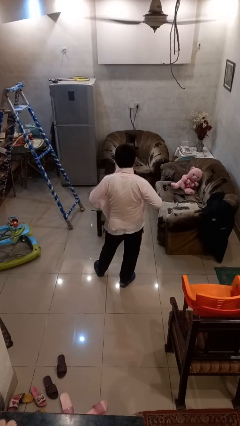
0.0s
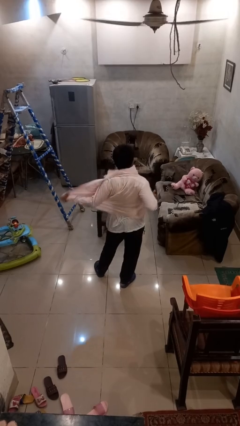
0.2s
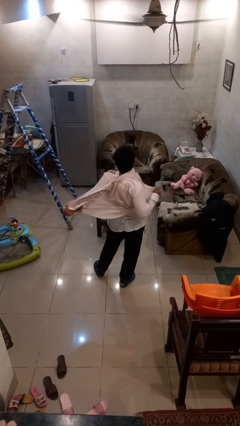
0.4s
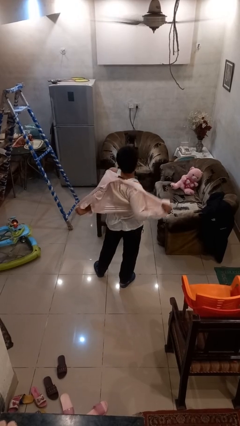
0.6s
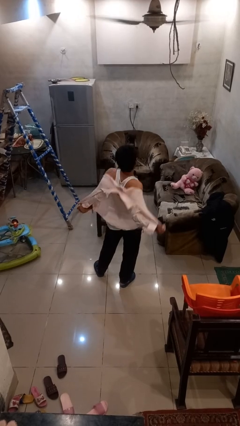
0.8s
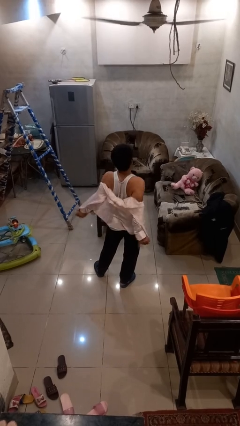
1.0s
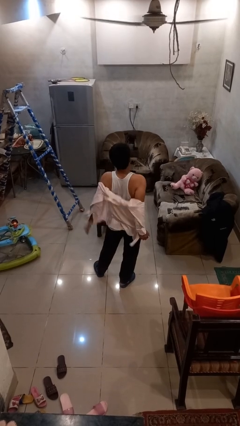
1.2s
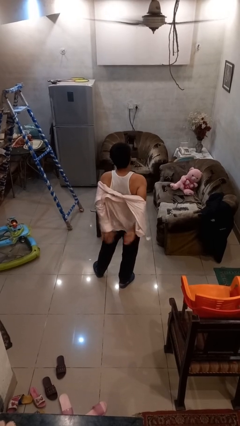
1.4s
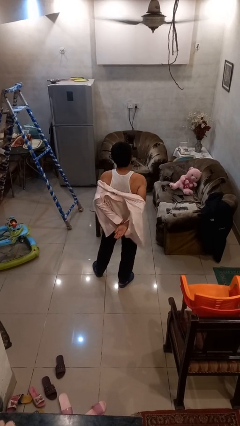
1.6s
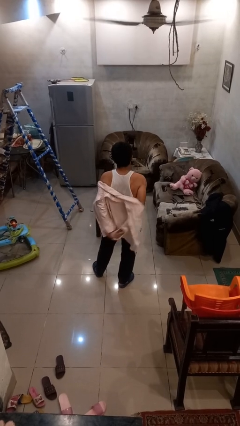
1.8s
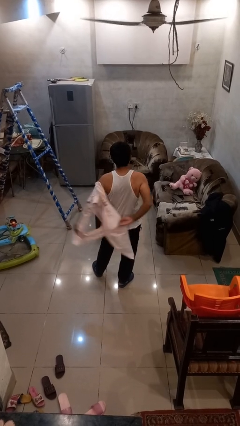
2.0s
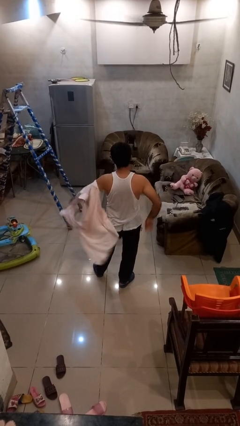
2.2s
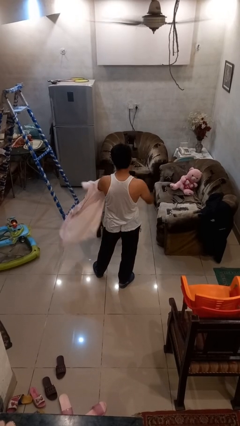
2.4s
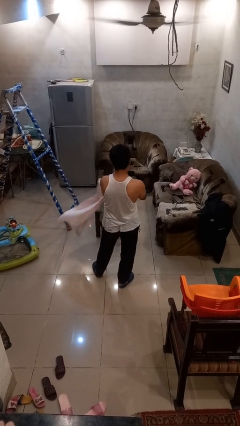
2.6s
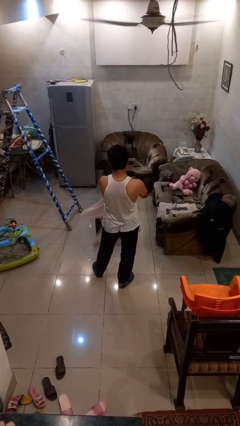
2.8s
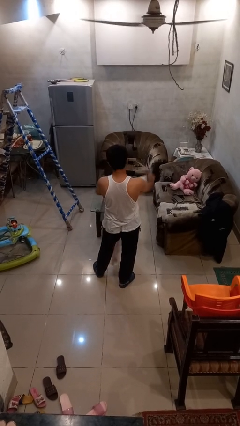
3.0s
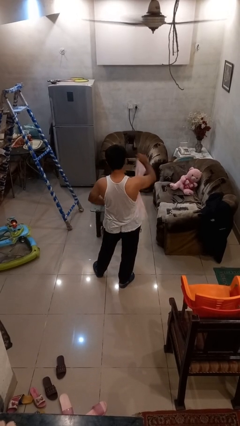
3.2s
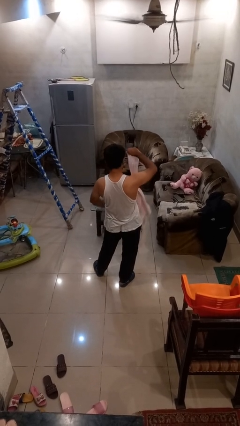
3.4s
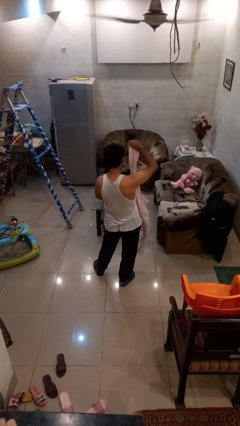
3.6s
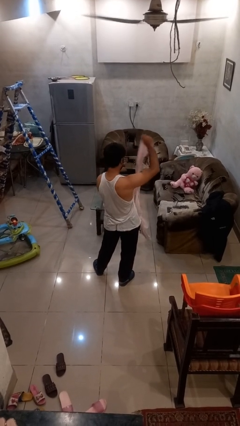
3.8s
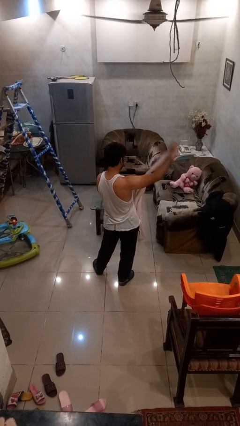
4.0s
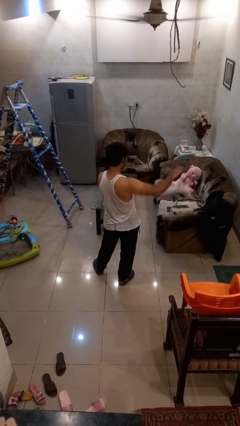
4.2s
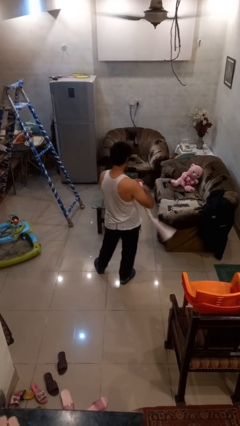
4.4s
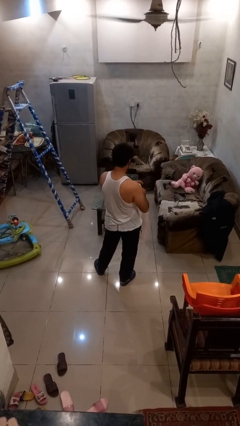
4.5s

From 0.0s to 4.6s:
person takes off shirt

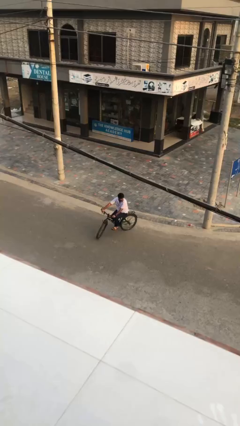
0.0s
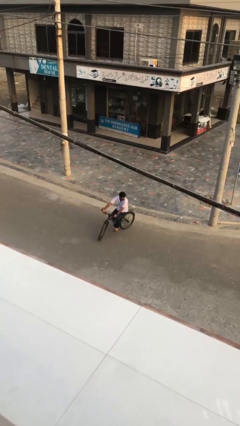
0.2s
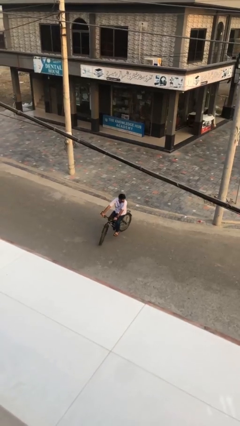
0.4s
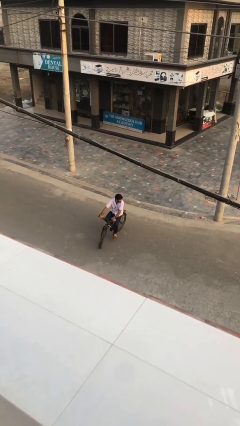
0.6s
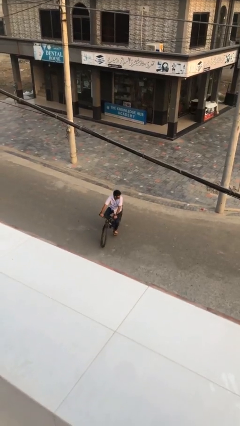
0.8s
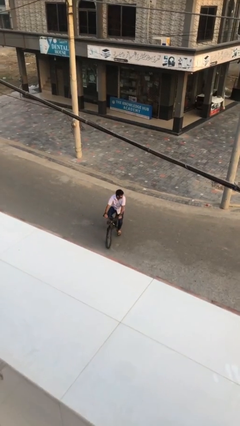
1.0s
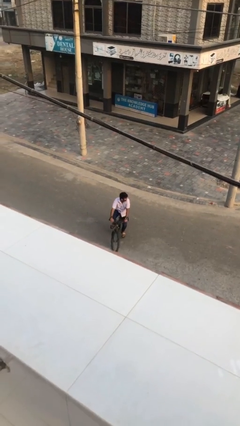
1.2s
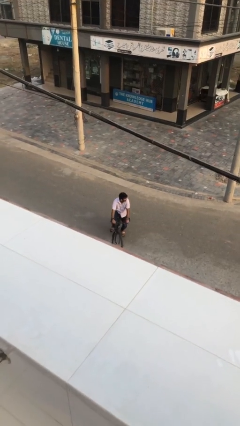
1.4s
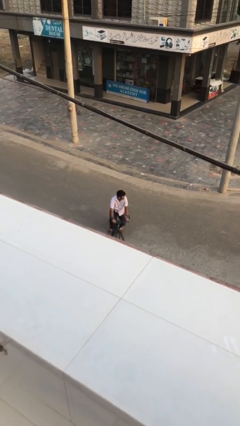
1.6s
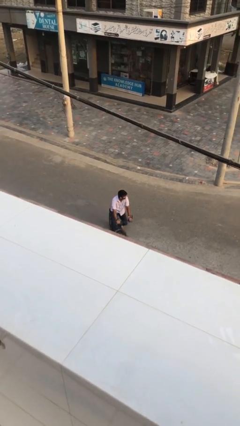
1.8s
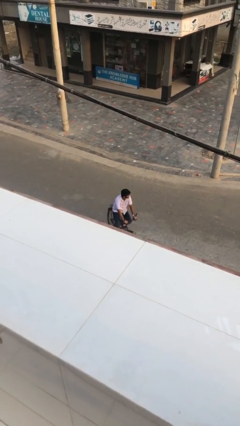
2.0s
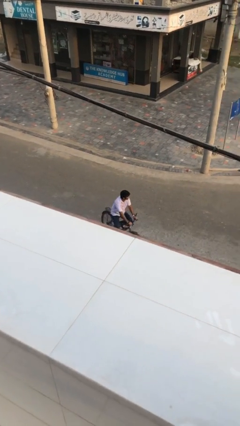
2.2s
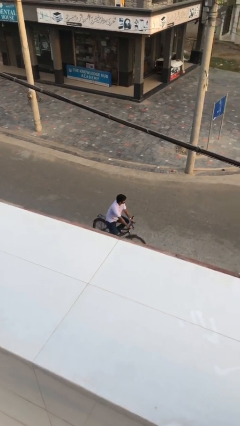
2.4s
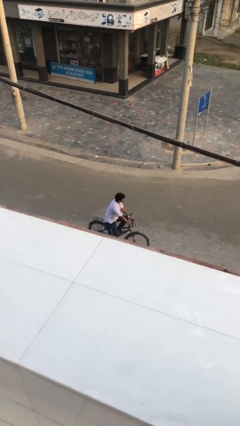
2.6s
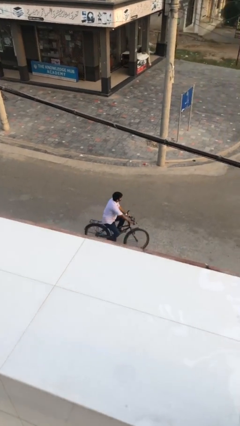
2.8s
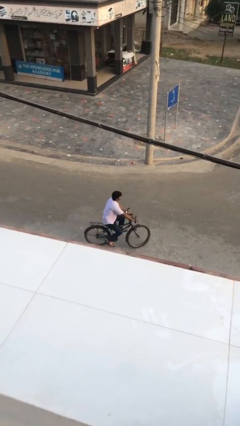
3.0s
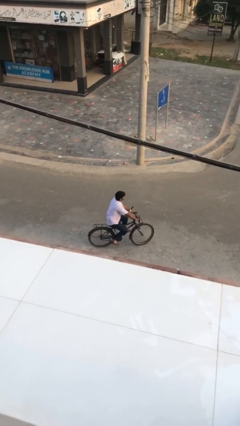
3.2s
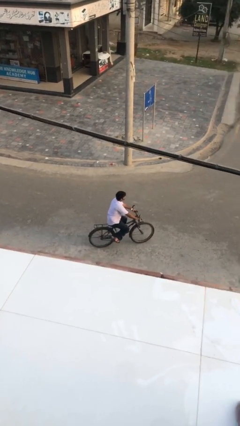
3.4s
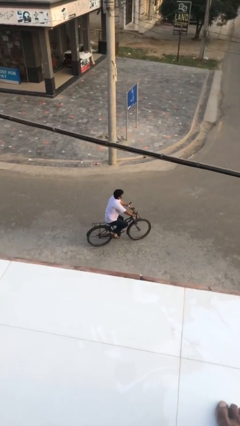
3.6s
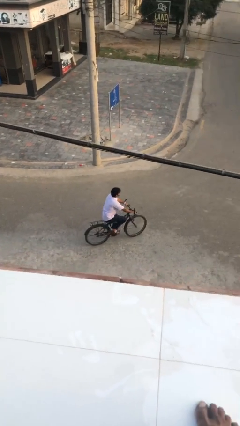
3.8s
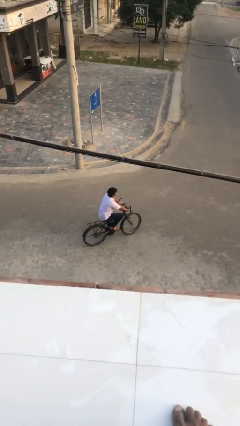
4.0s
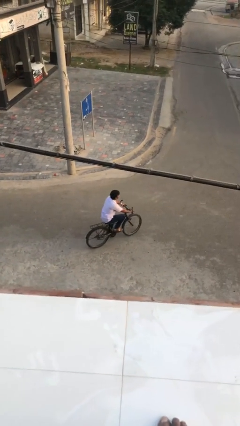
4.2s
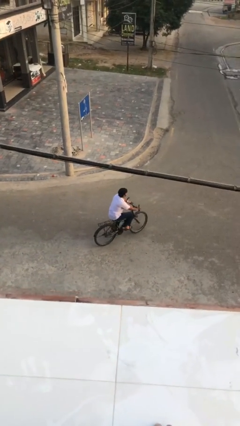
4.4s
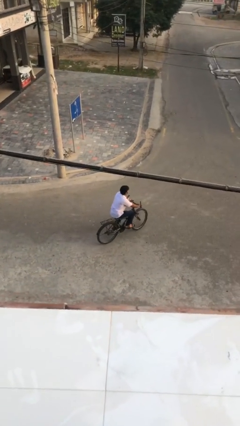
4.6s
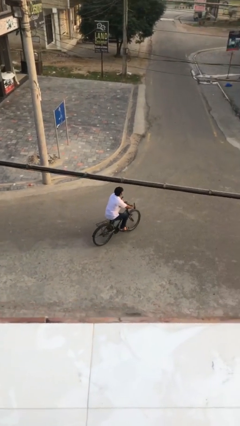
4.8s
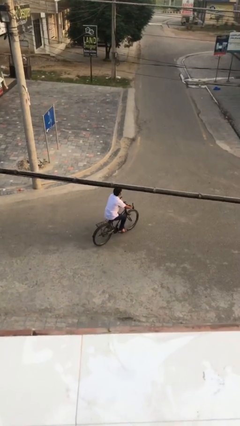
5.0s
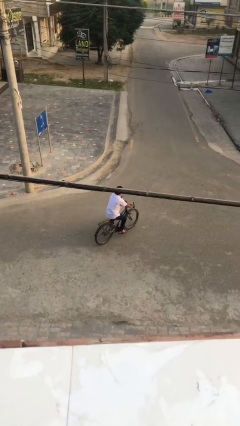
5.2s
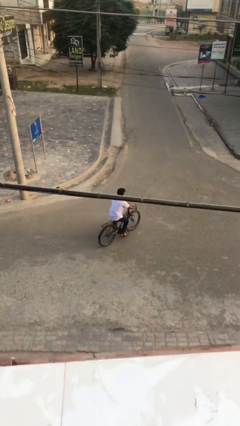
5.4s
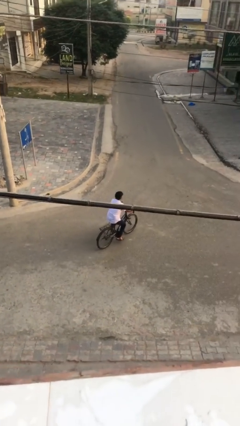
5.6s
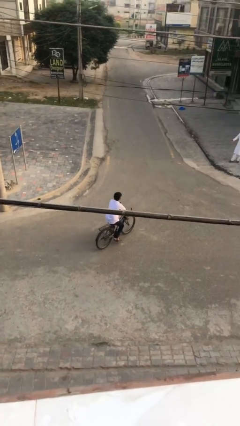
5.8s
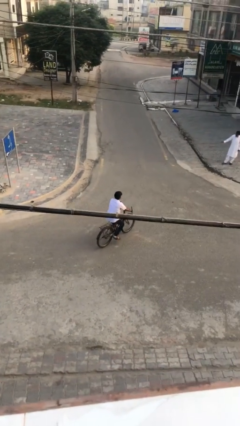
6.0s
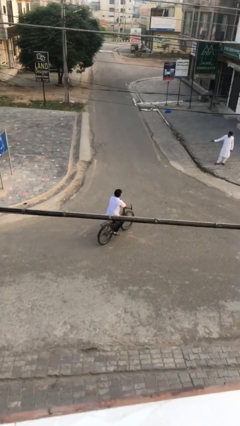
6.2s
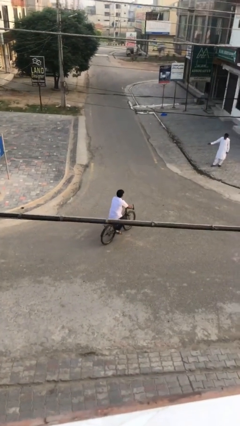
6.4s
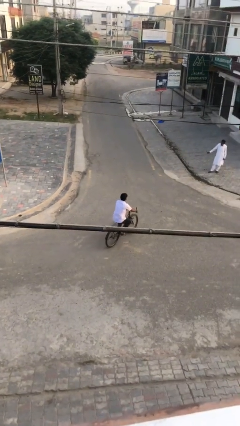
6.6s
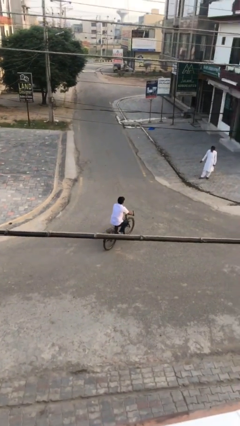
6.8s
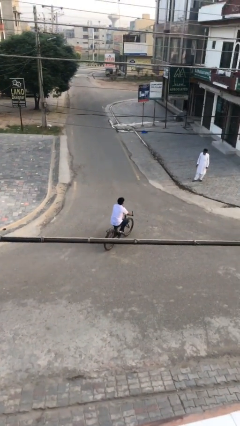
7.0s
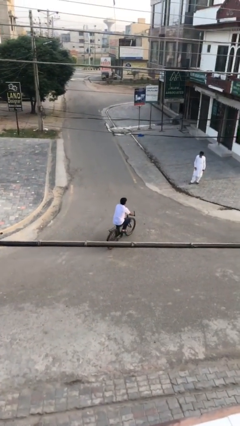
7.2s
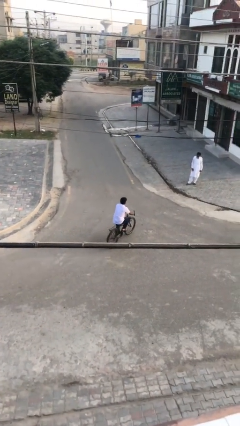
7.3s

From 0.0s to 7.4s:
person rides bicycle

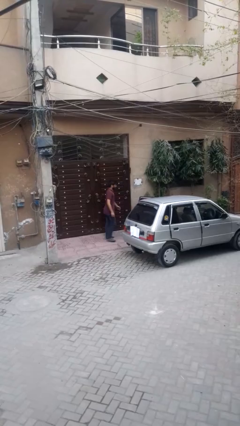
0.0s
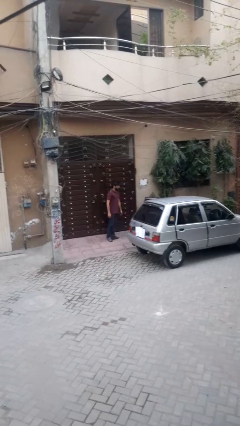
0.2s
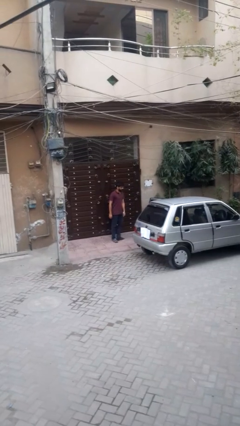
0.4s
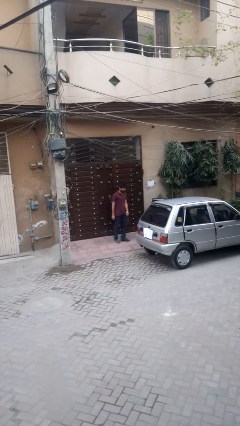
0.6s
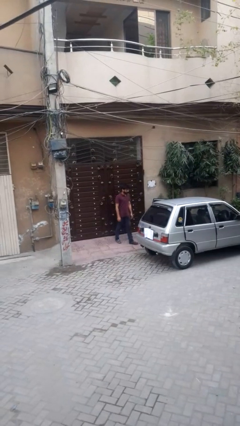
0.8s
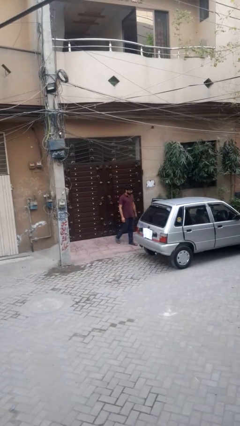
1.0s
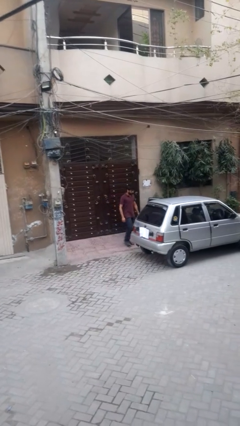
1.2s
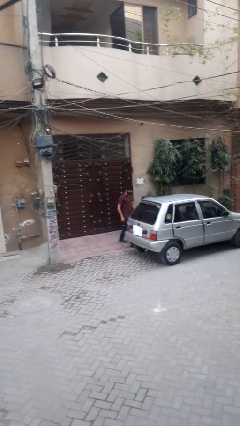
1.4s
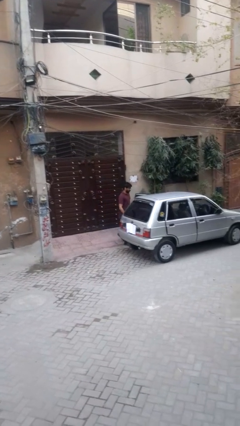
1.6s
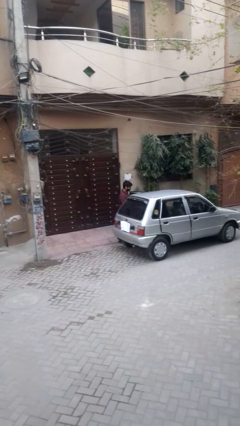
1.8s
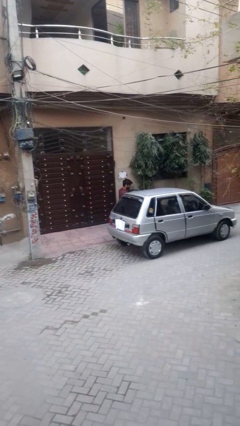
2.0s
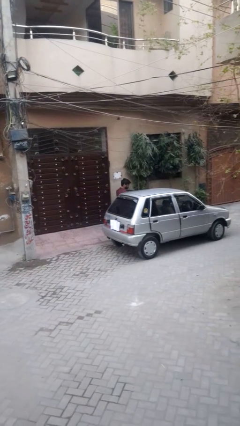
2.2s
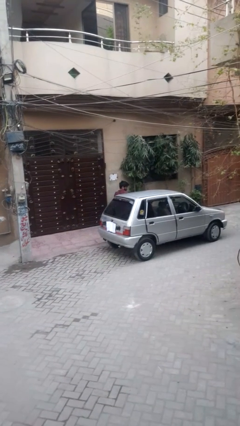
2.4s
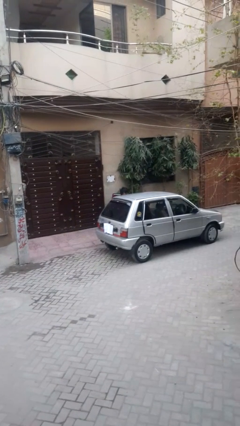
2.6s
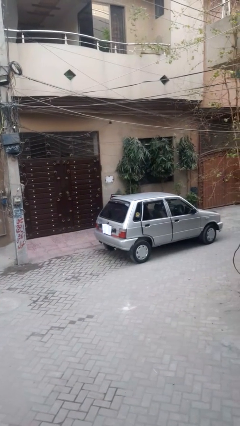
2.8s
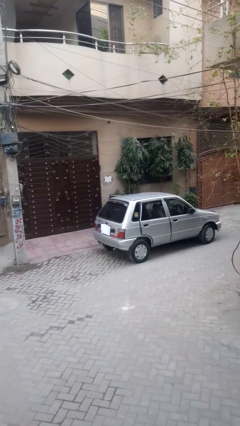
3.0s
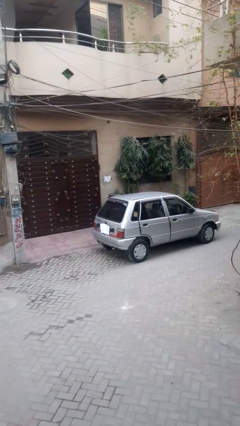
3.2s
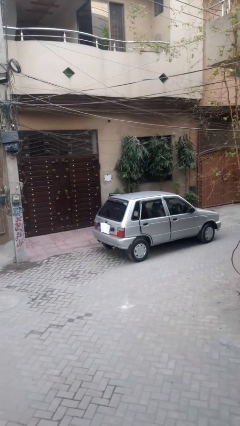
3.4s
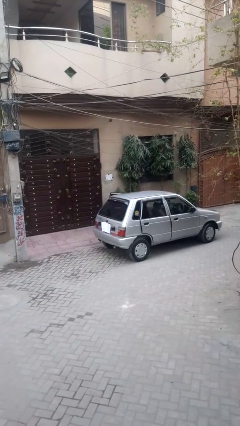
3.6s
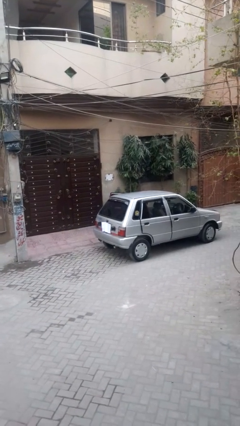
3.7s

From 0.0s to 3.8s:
person enters car

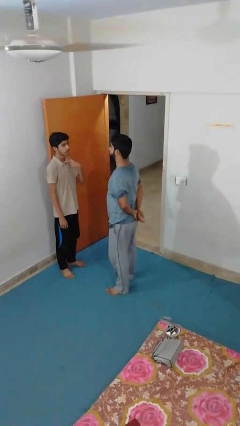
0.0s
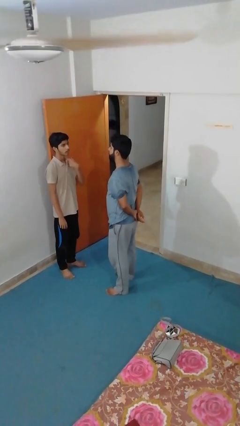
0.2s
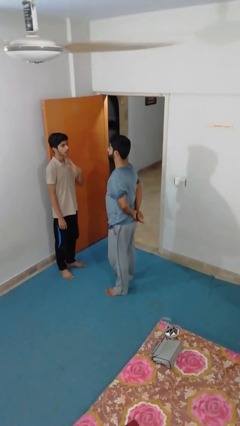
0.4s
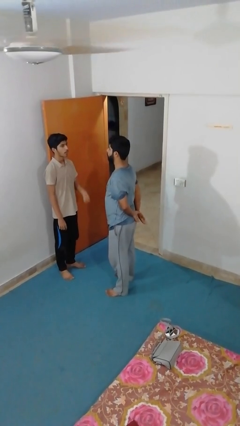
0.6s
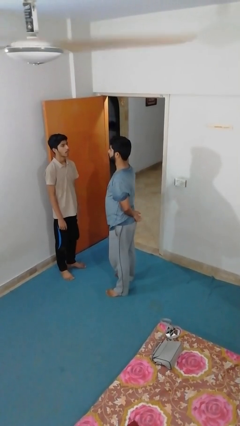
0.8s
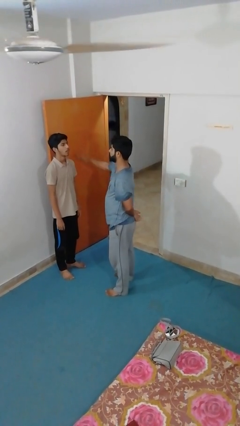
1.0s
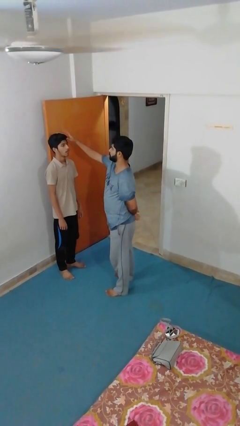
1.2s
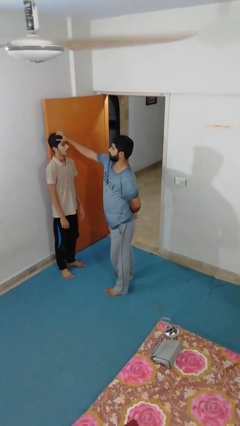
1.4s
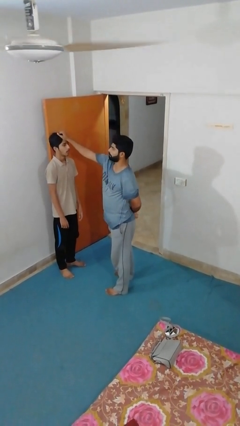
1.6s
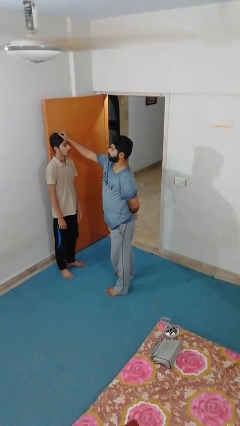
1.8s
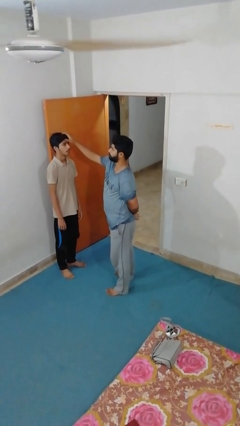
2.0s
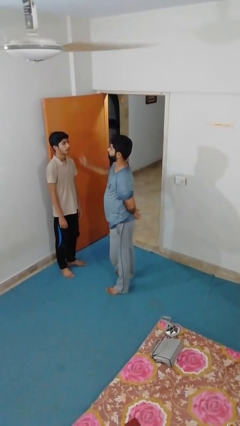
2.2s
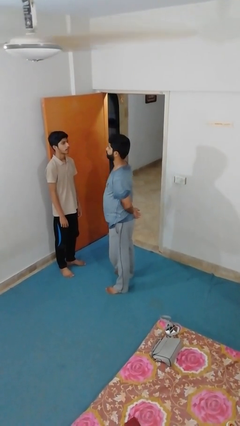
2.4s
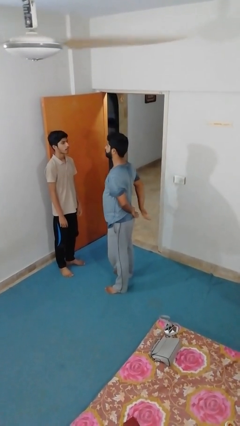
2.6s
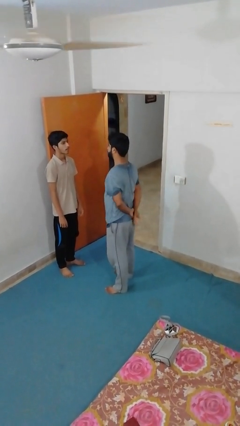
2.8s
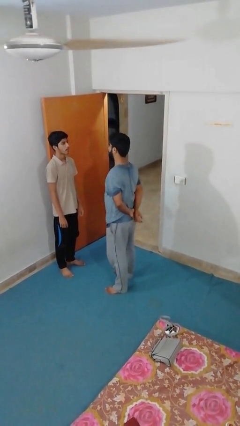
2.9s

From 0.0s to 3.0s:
person grabs person by hair
